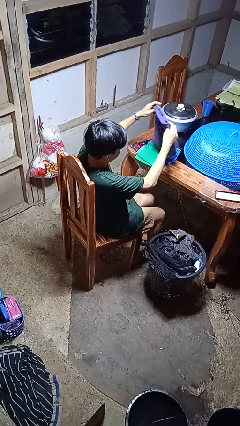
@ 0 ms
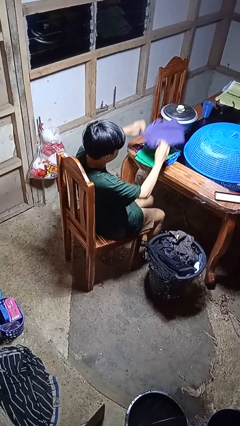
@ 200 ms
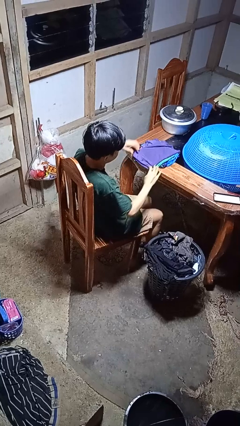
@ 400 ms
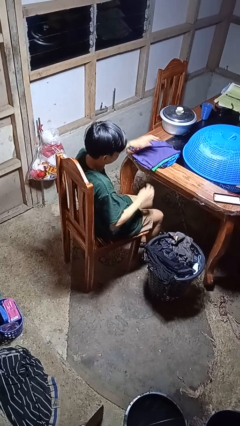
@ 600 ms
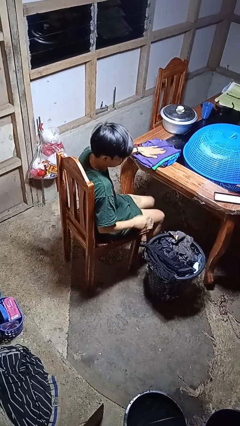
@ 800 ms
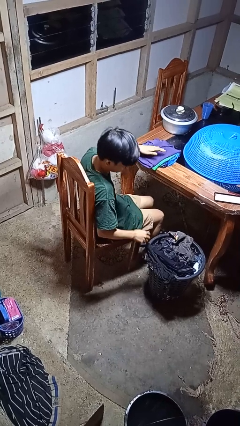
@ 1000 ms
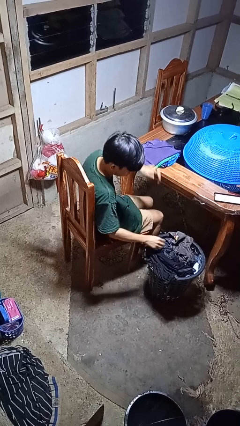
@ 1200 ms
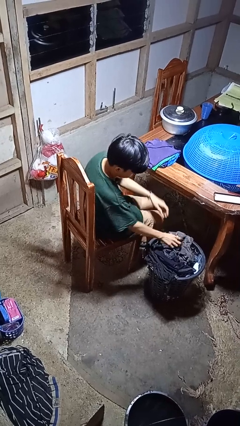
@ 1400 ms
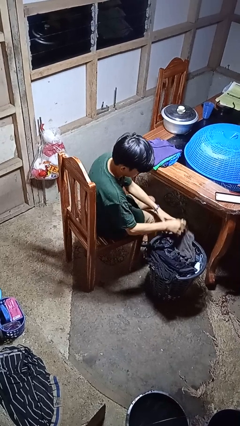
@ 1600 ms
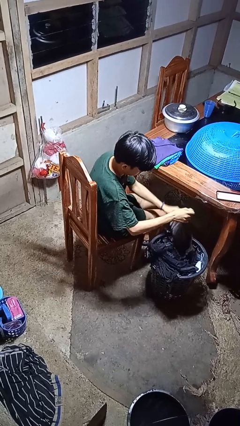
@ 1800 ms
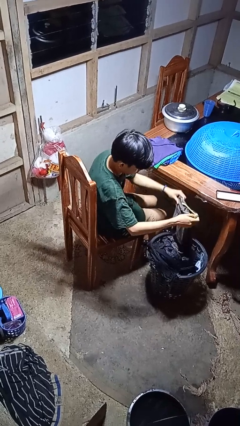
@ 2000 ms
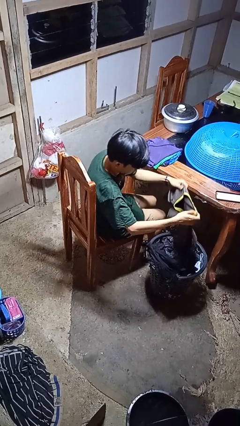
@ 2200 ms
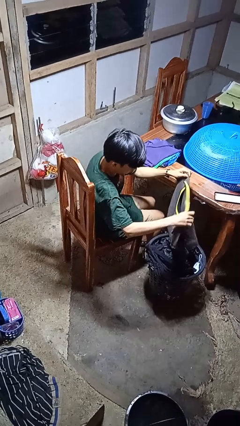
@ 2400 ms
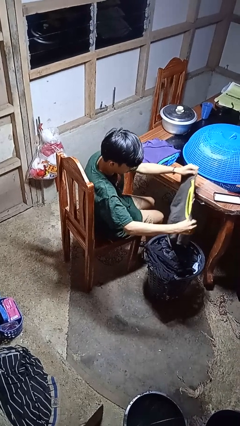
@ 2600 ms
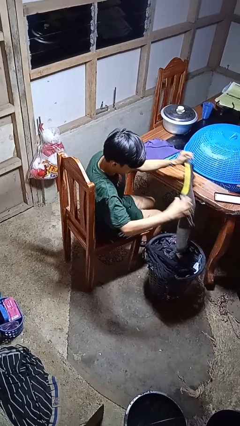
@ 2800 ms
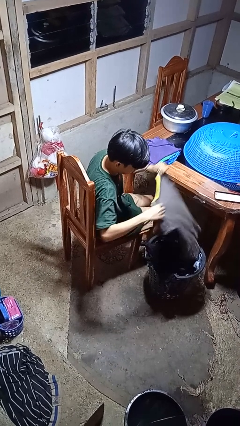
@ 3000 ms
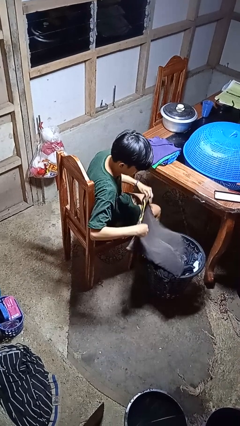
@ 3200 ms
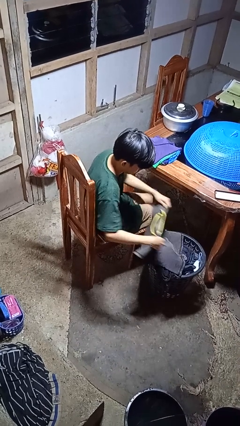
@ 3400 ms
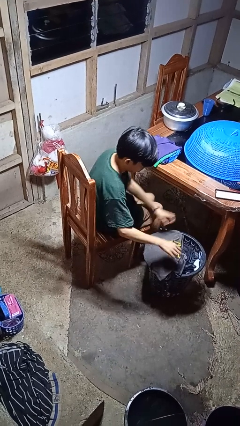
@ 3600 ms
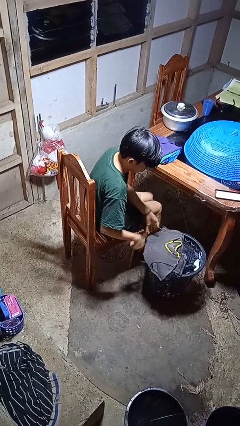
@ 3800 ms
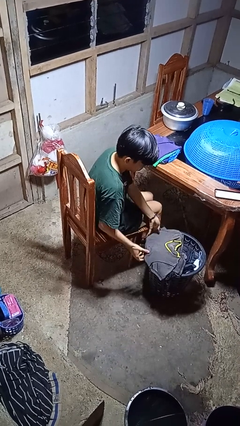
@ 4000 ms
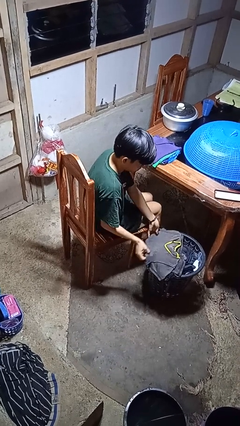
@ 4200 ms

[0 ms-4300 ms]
person folds shirt

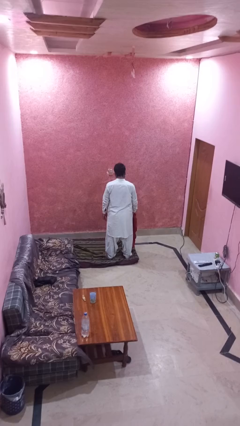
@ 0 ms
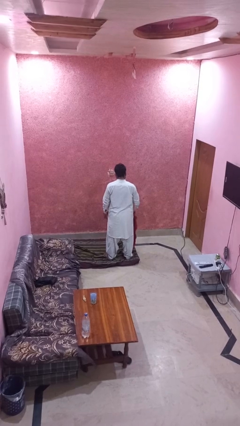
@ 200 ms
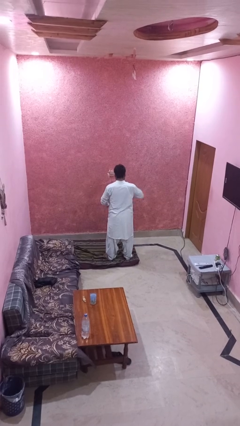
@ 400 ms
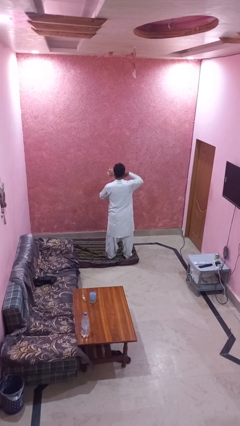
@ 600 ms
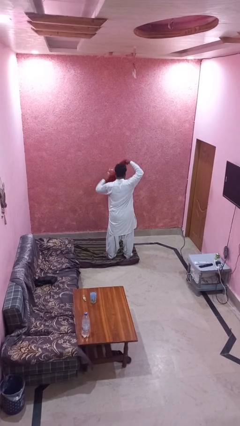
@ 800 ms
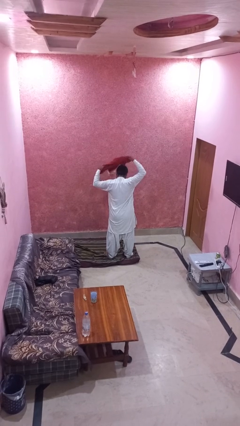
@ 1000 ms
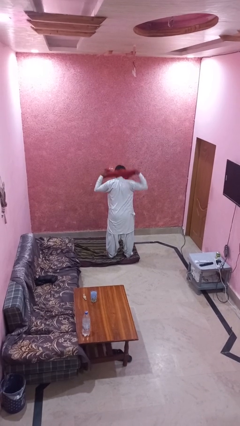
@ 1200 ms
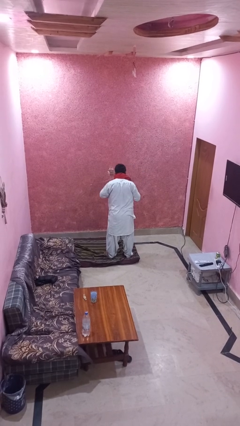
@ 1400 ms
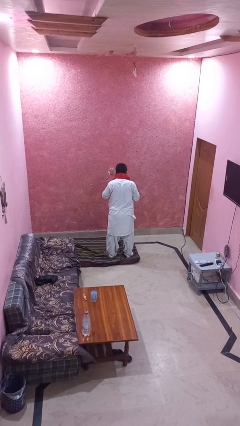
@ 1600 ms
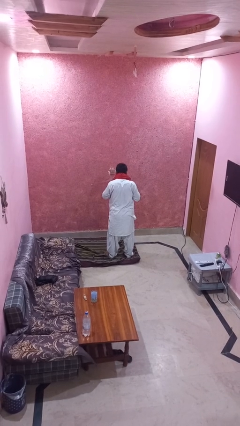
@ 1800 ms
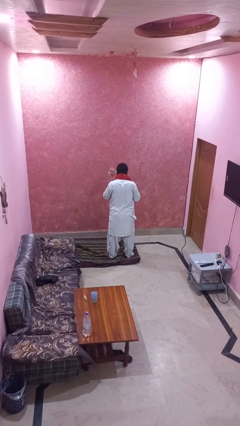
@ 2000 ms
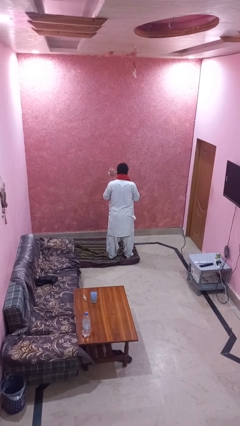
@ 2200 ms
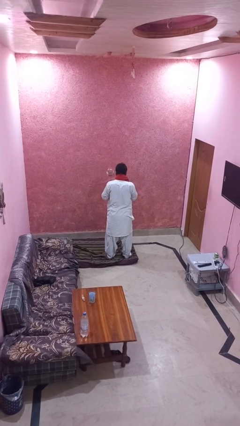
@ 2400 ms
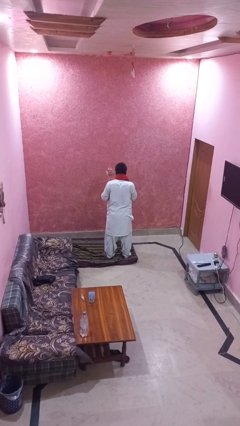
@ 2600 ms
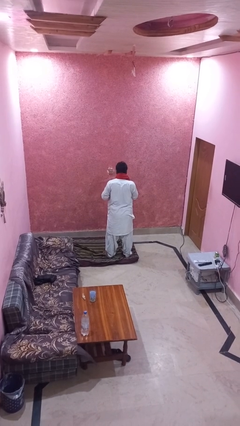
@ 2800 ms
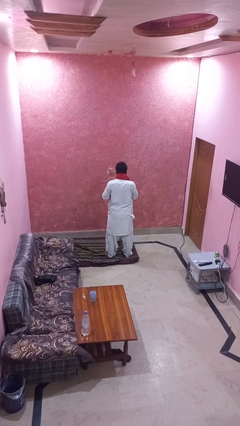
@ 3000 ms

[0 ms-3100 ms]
person puts on scarf

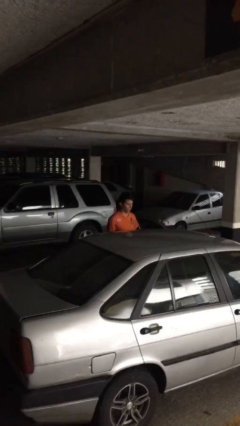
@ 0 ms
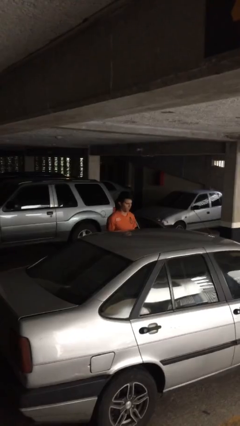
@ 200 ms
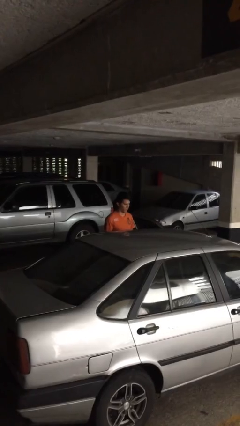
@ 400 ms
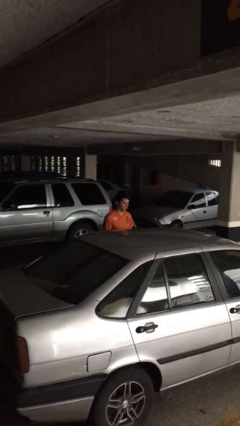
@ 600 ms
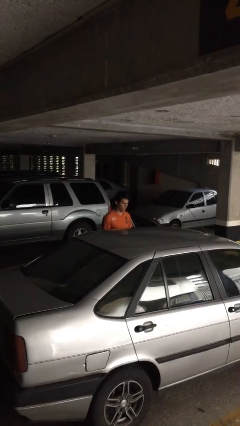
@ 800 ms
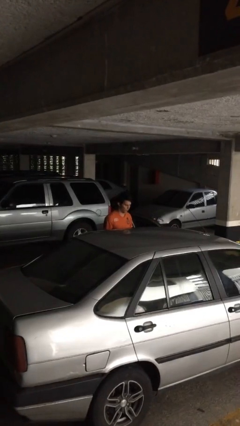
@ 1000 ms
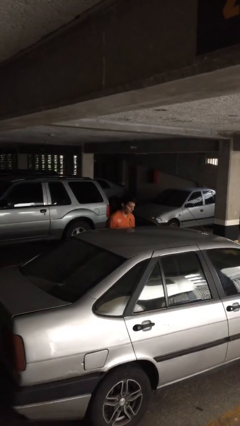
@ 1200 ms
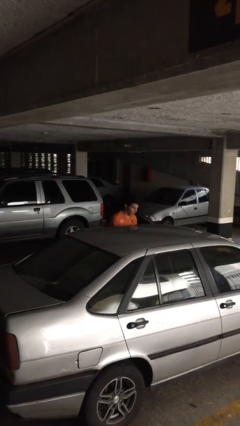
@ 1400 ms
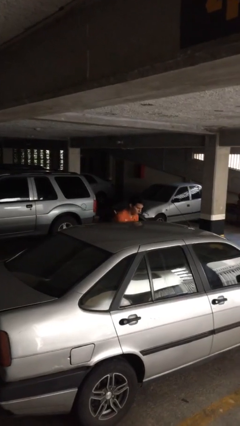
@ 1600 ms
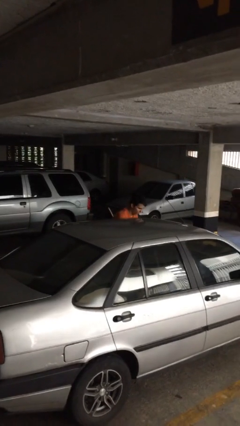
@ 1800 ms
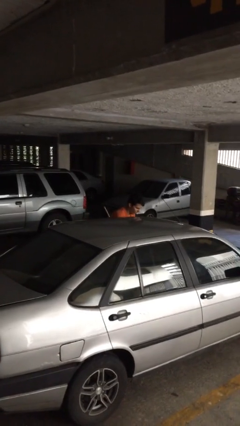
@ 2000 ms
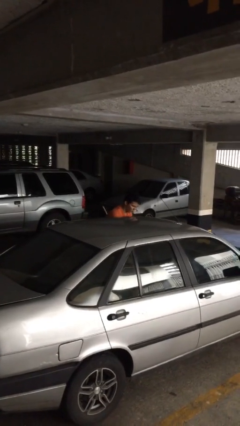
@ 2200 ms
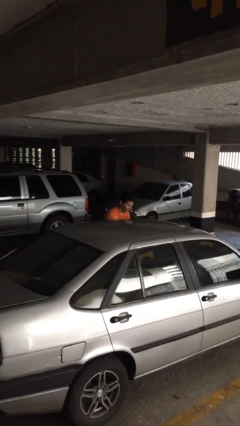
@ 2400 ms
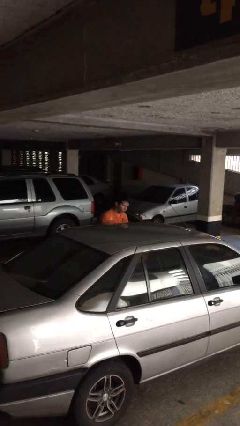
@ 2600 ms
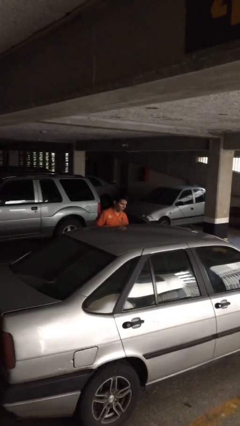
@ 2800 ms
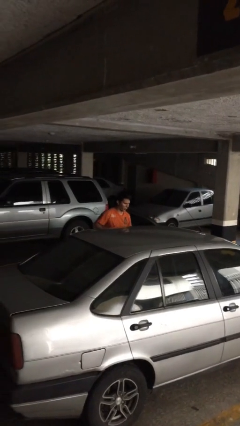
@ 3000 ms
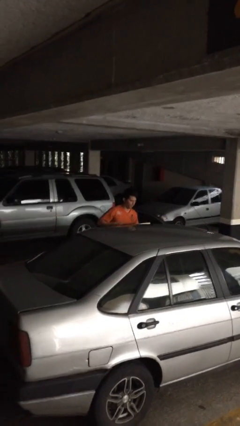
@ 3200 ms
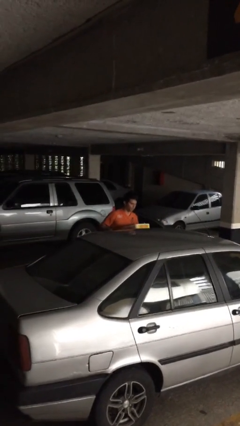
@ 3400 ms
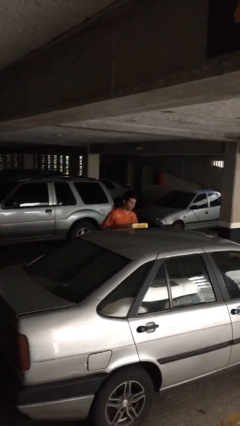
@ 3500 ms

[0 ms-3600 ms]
person unloads car

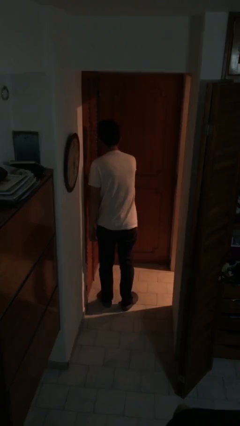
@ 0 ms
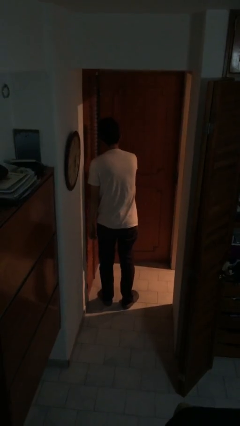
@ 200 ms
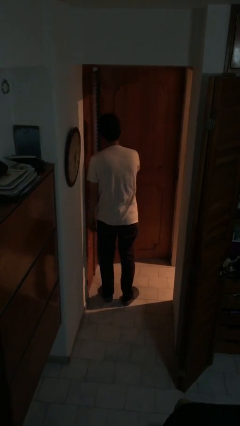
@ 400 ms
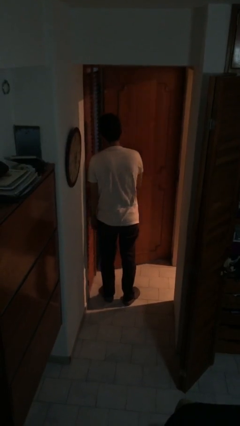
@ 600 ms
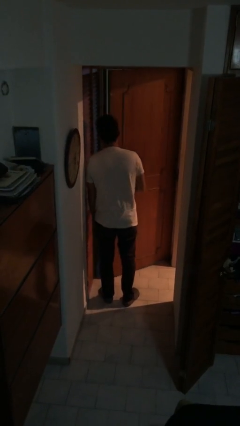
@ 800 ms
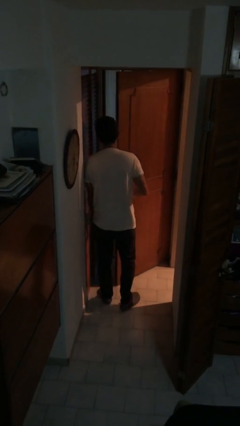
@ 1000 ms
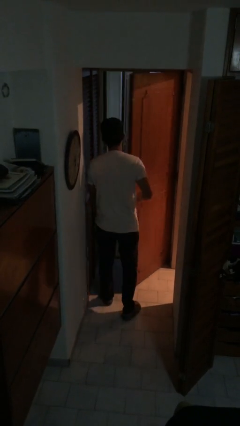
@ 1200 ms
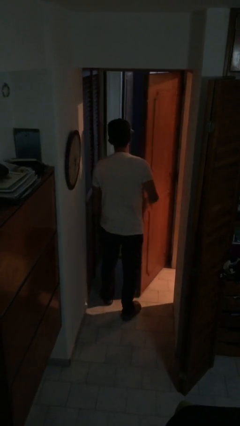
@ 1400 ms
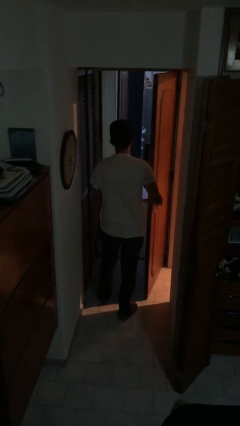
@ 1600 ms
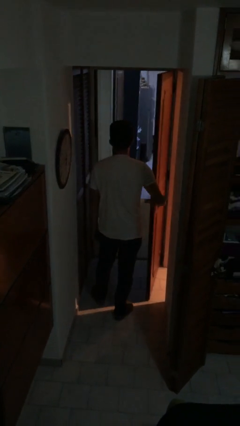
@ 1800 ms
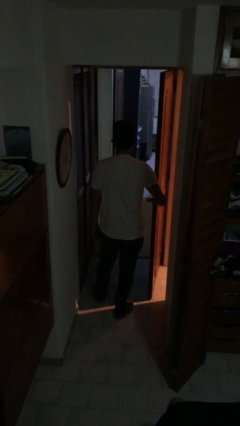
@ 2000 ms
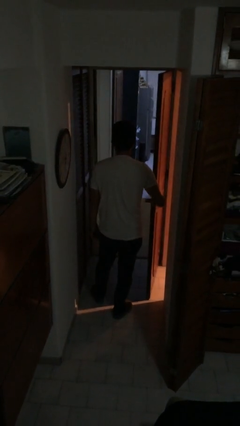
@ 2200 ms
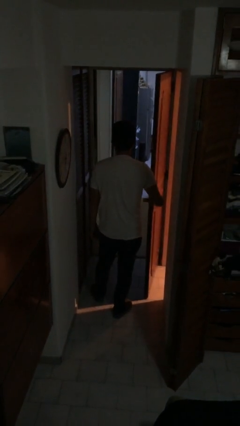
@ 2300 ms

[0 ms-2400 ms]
person opens facility door

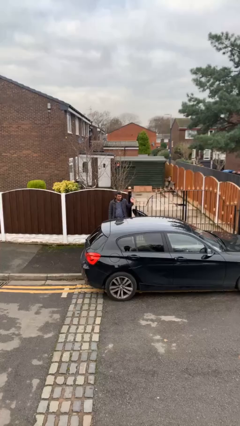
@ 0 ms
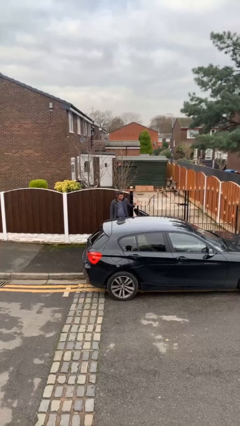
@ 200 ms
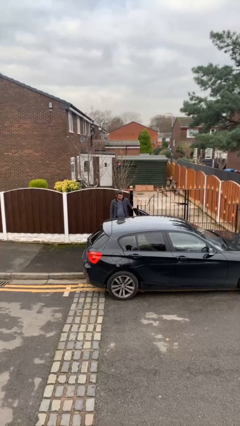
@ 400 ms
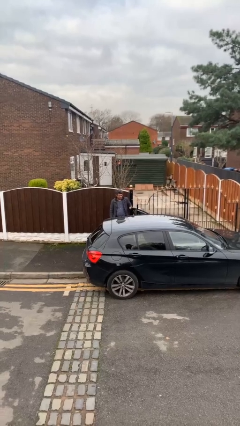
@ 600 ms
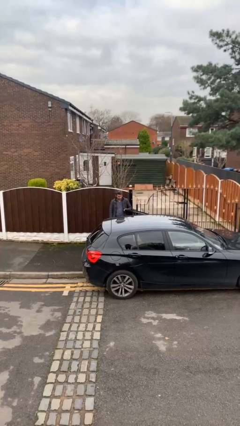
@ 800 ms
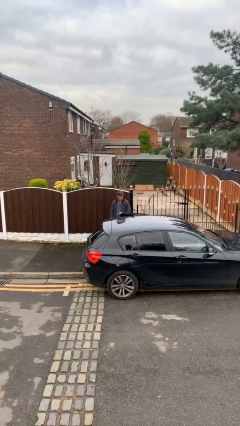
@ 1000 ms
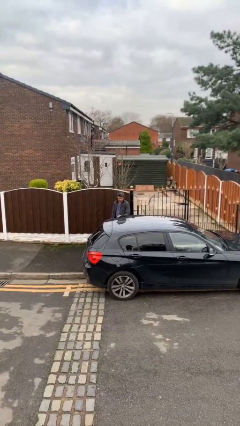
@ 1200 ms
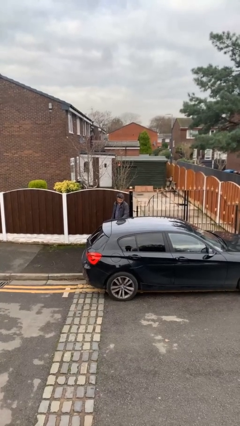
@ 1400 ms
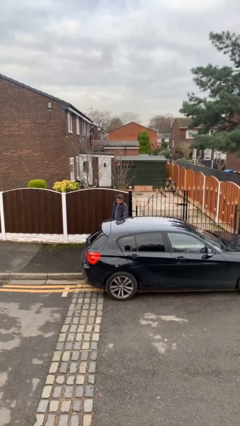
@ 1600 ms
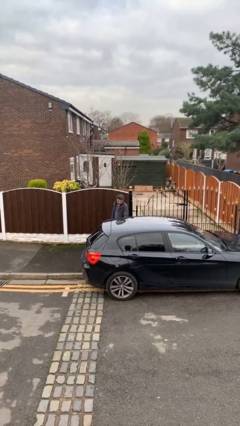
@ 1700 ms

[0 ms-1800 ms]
person closes car door

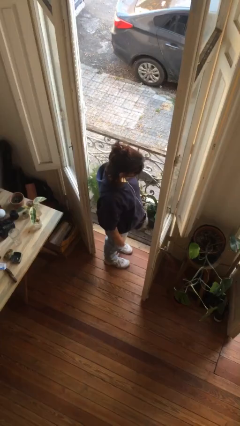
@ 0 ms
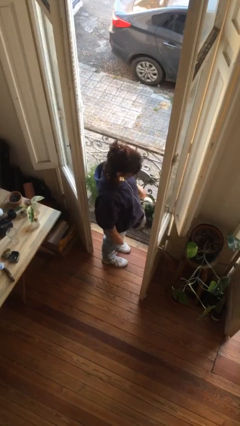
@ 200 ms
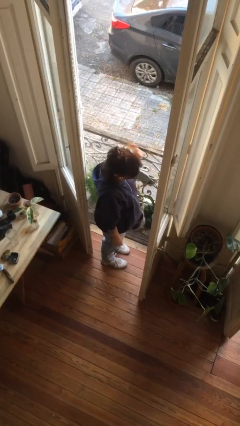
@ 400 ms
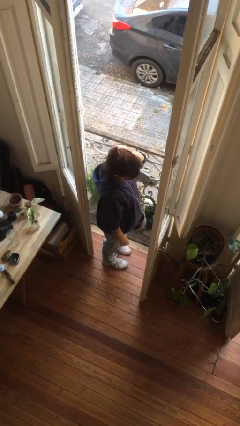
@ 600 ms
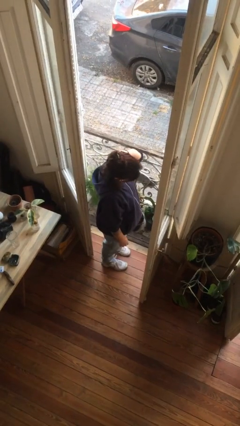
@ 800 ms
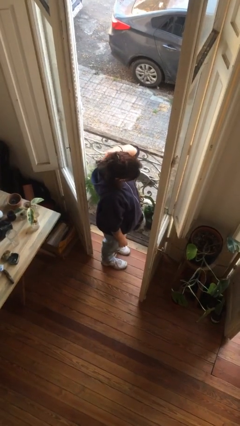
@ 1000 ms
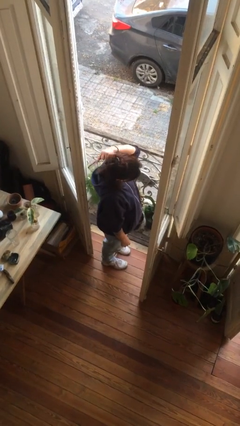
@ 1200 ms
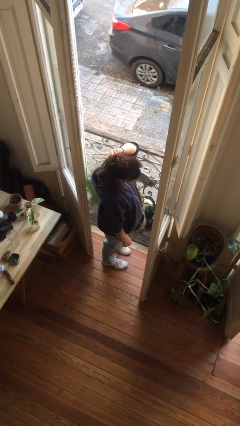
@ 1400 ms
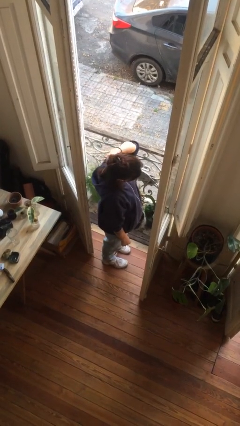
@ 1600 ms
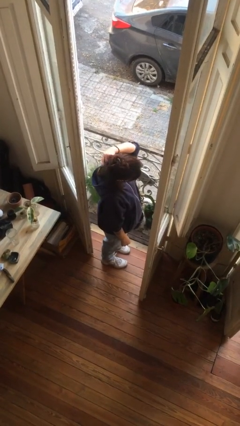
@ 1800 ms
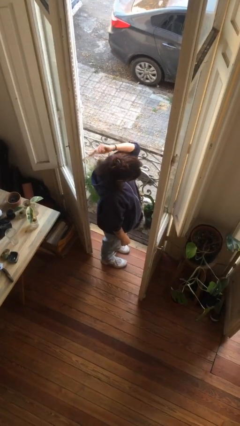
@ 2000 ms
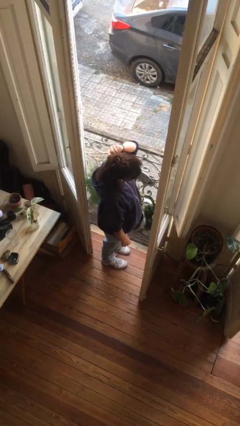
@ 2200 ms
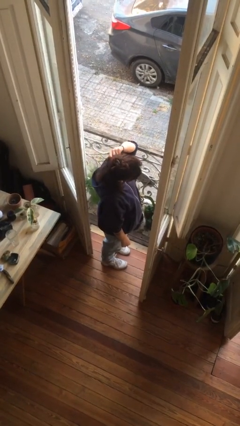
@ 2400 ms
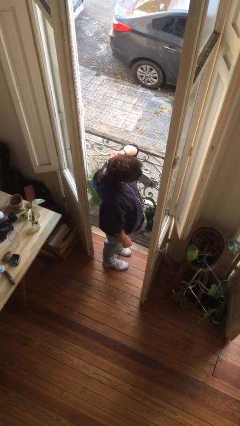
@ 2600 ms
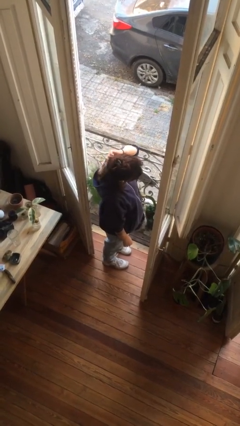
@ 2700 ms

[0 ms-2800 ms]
person brushes hair
